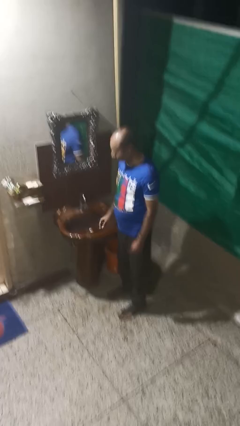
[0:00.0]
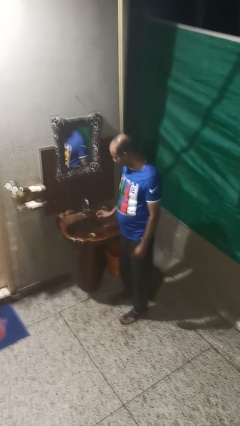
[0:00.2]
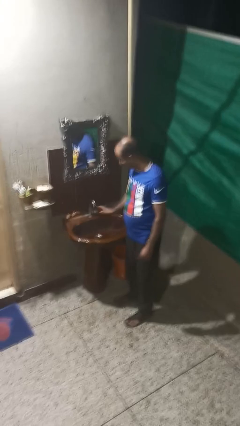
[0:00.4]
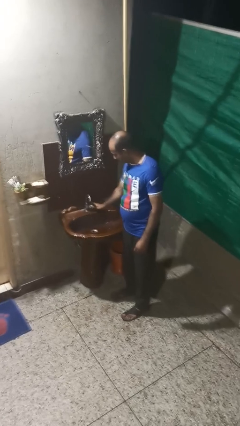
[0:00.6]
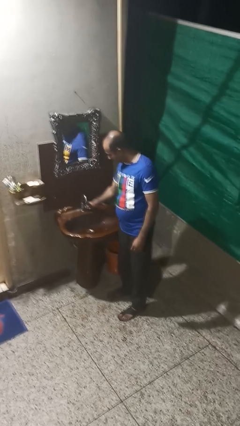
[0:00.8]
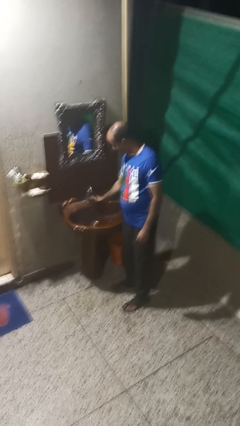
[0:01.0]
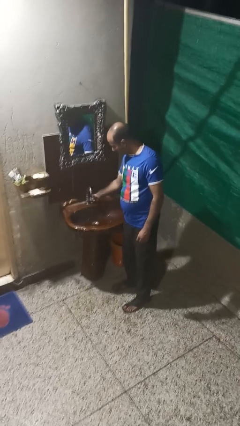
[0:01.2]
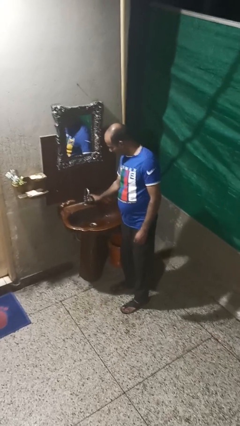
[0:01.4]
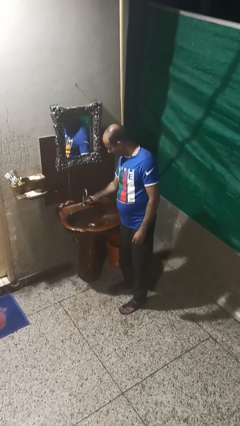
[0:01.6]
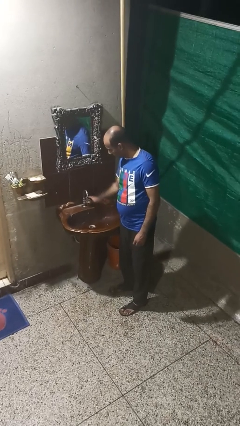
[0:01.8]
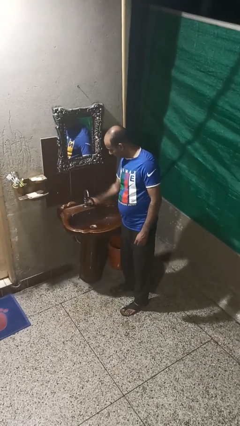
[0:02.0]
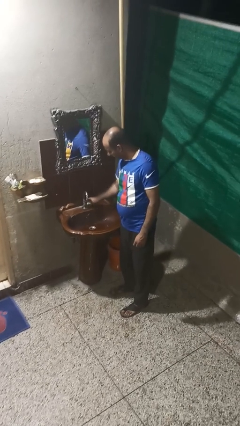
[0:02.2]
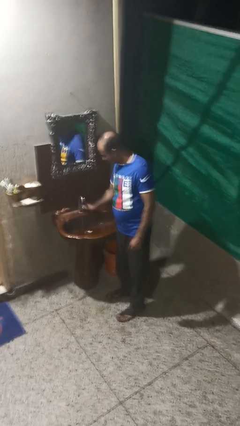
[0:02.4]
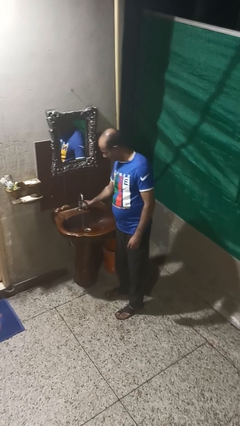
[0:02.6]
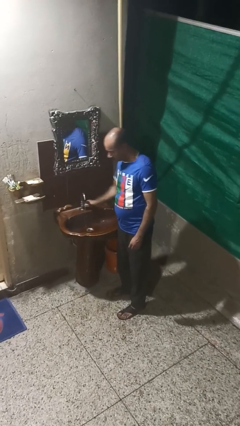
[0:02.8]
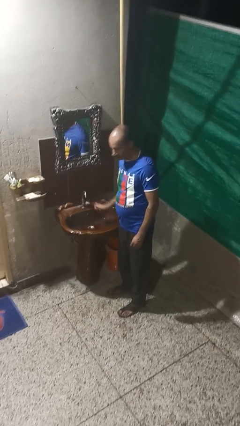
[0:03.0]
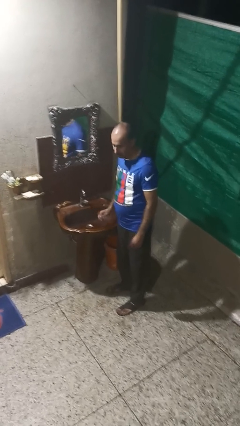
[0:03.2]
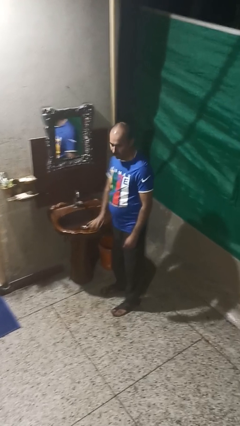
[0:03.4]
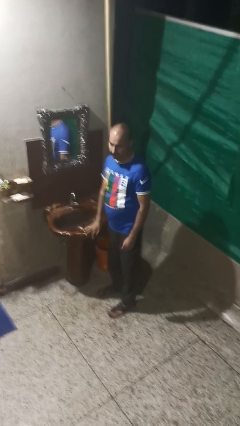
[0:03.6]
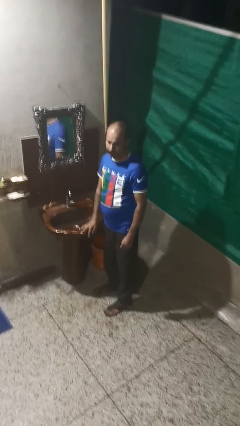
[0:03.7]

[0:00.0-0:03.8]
person turns off faucet

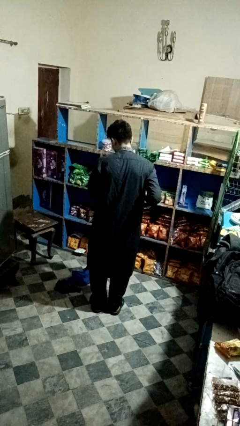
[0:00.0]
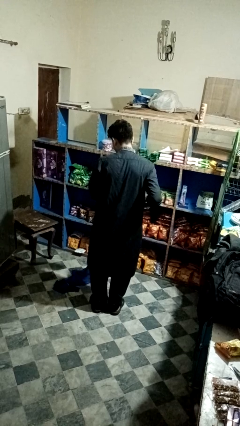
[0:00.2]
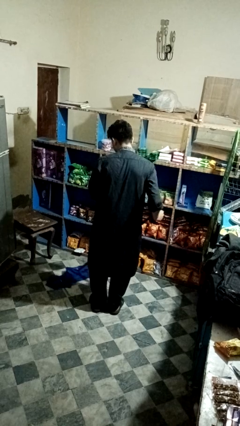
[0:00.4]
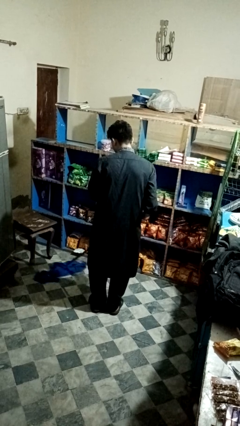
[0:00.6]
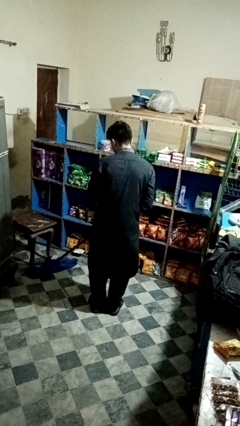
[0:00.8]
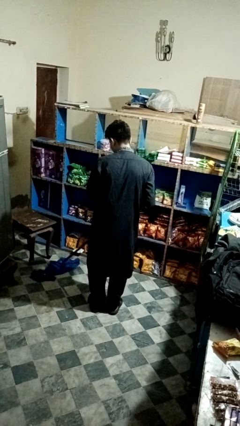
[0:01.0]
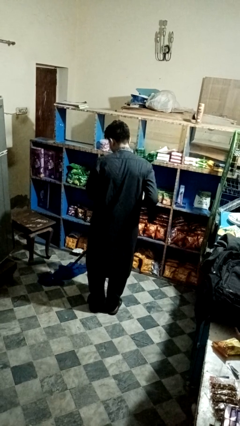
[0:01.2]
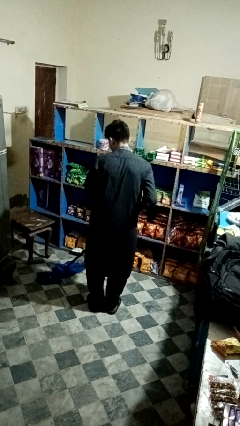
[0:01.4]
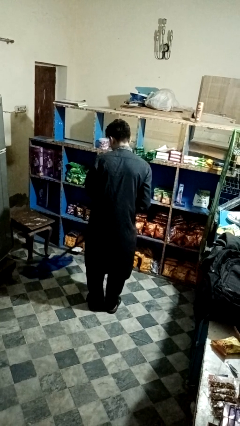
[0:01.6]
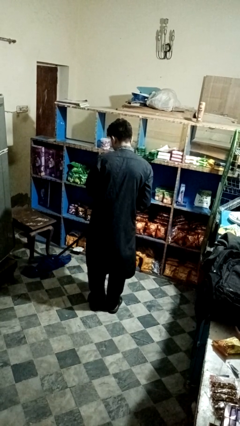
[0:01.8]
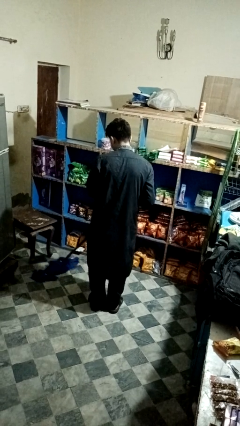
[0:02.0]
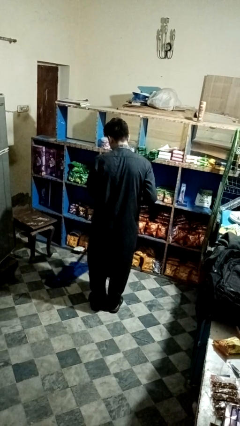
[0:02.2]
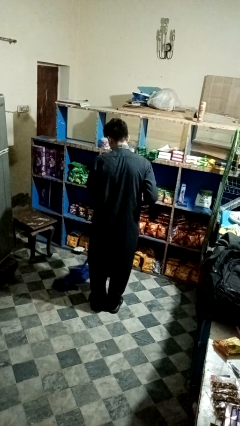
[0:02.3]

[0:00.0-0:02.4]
person mops

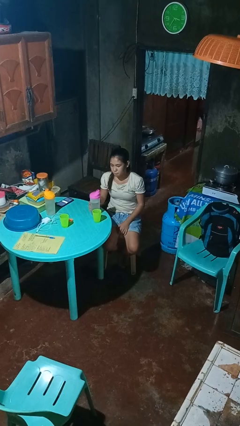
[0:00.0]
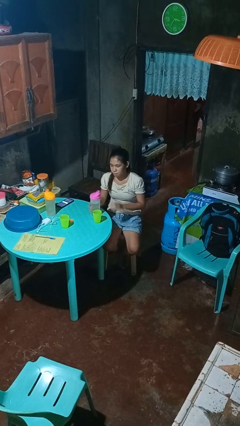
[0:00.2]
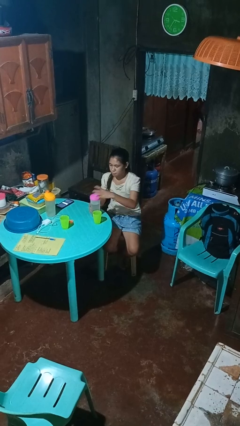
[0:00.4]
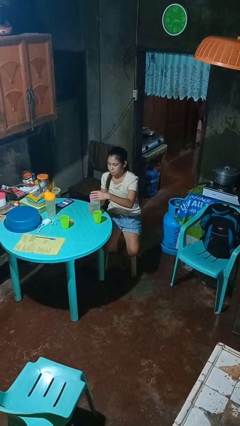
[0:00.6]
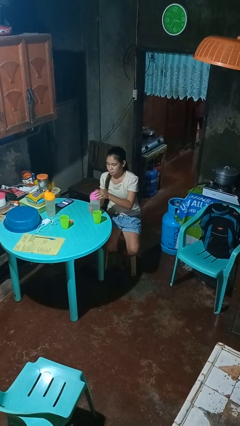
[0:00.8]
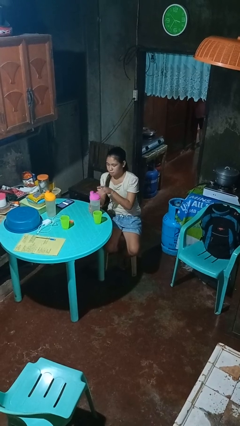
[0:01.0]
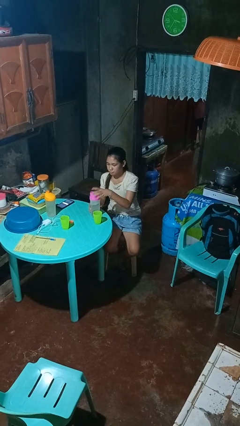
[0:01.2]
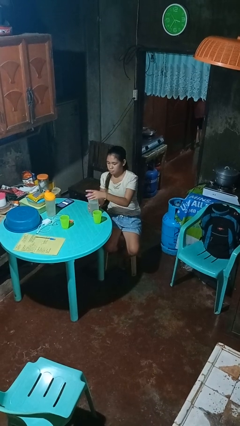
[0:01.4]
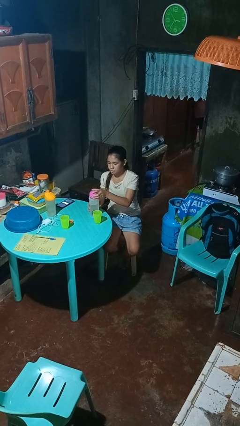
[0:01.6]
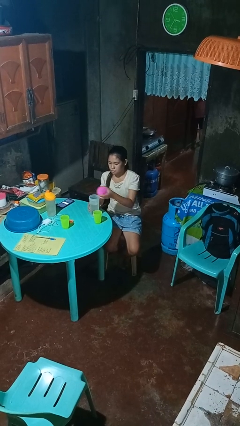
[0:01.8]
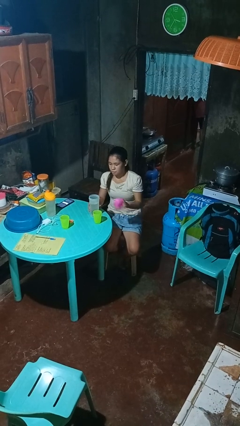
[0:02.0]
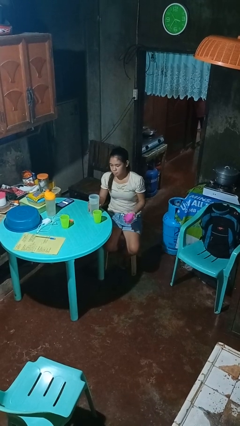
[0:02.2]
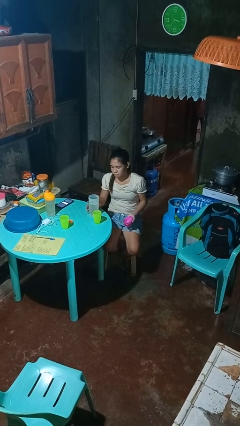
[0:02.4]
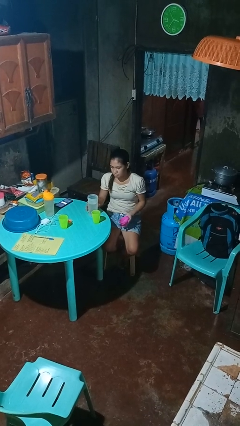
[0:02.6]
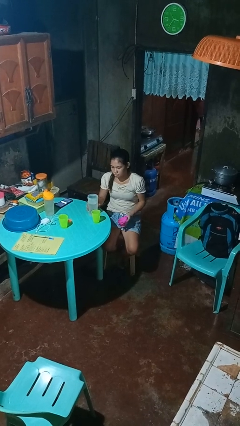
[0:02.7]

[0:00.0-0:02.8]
person unscrews lid from bottle

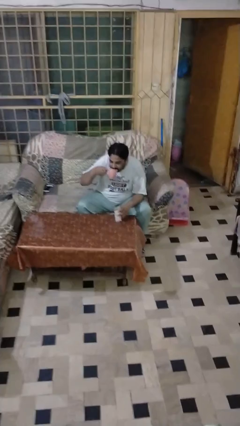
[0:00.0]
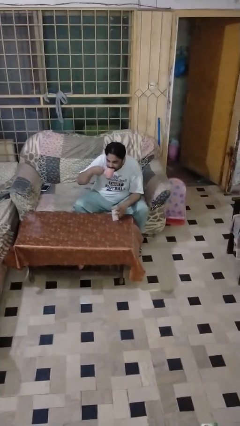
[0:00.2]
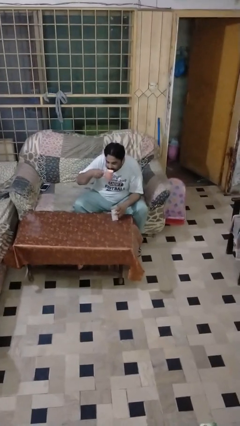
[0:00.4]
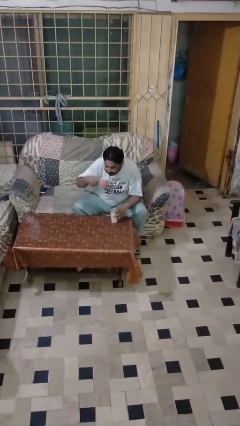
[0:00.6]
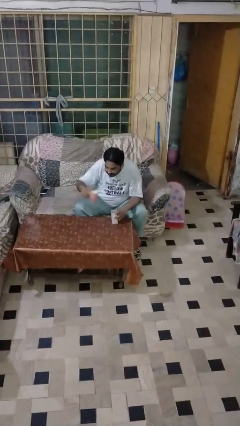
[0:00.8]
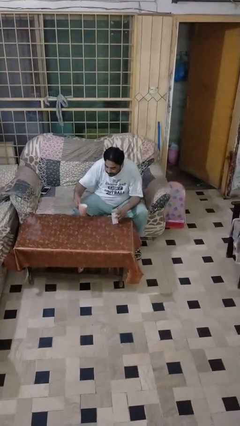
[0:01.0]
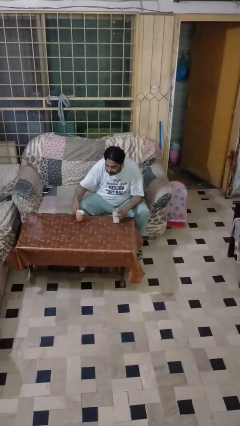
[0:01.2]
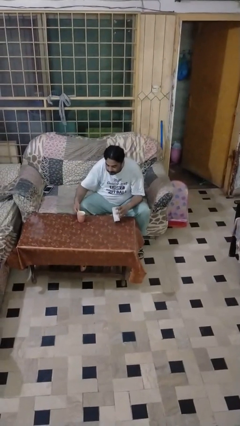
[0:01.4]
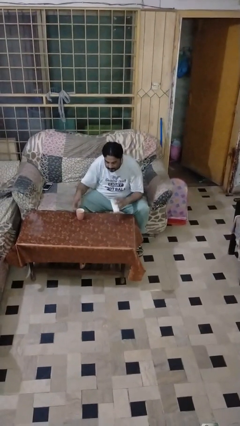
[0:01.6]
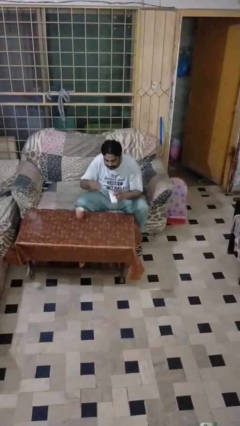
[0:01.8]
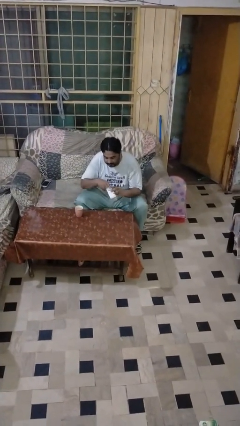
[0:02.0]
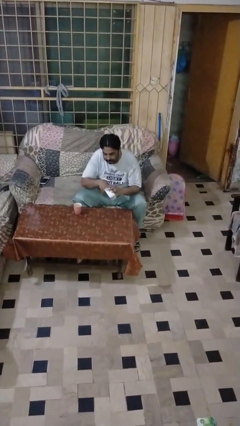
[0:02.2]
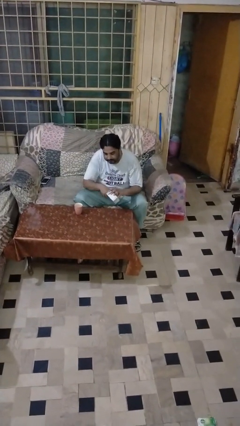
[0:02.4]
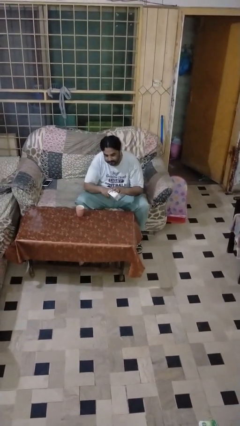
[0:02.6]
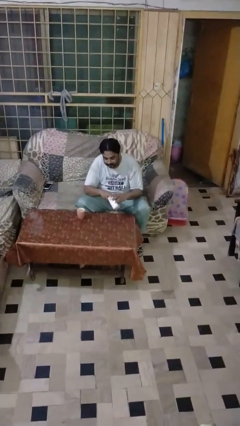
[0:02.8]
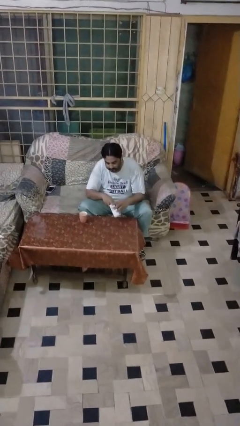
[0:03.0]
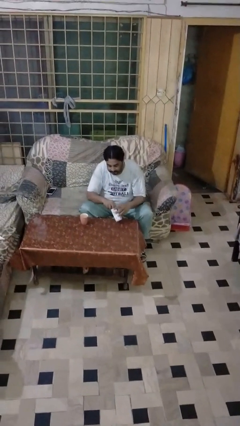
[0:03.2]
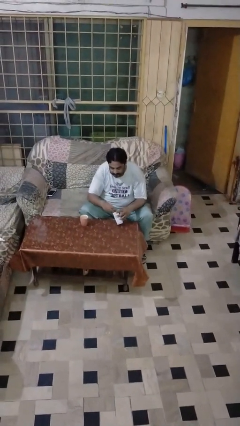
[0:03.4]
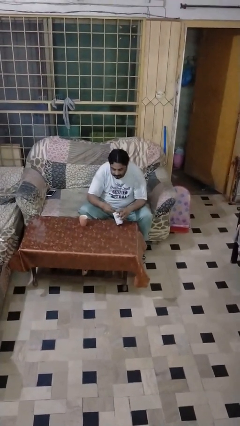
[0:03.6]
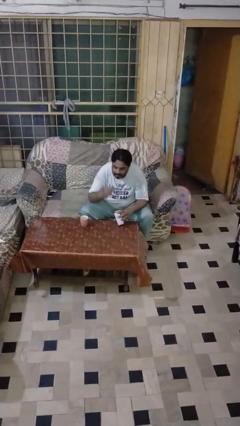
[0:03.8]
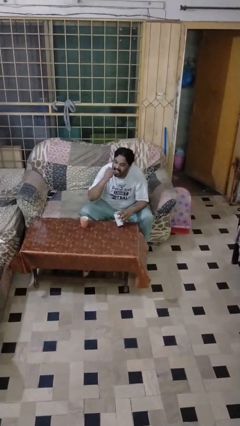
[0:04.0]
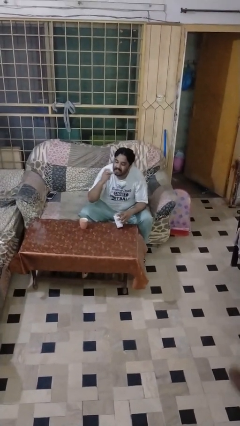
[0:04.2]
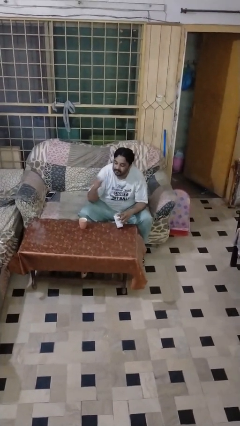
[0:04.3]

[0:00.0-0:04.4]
person takes medicine pills

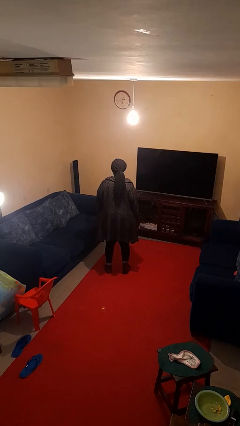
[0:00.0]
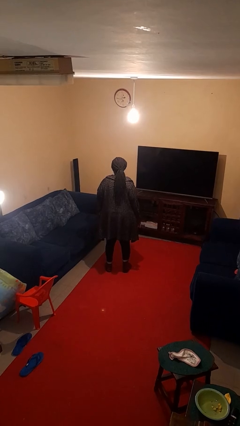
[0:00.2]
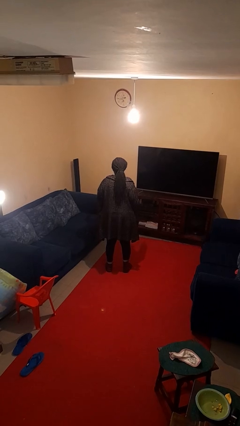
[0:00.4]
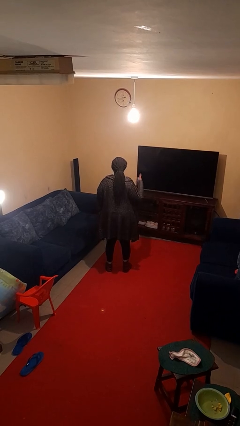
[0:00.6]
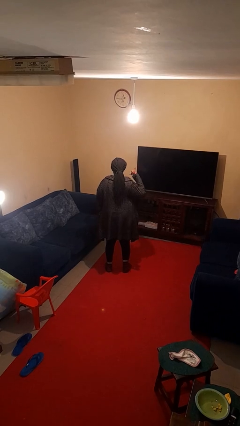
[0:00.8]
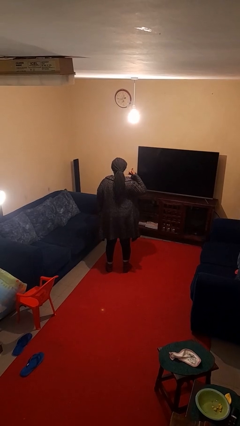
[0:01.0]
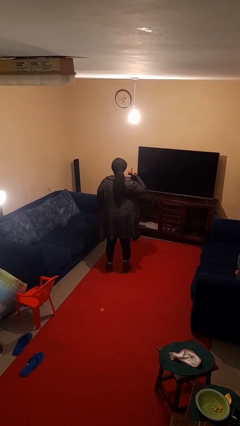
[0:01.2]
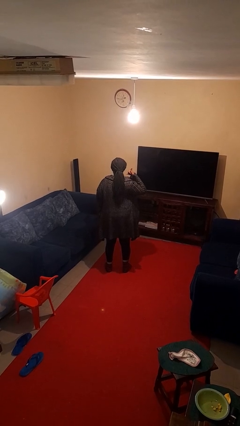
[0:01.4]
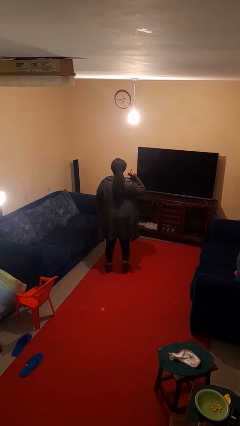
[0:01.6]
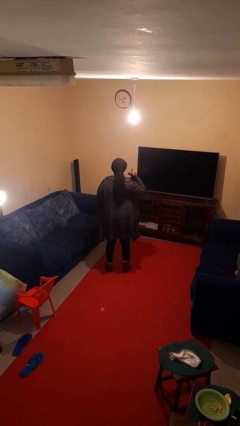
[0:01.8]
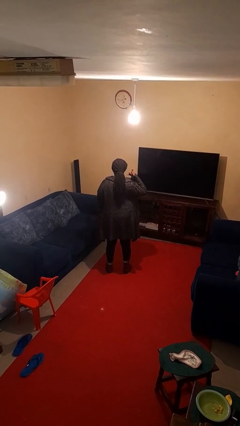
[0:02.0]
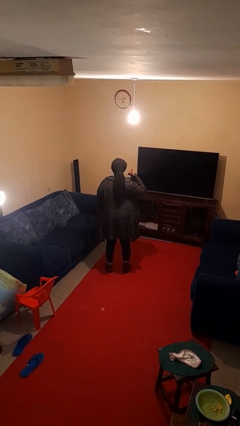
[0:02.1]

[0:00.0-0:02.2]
person gestures call me

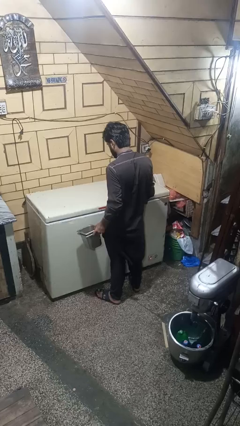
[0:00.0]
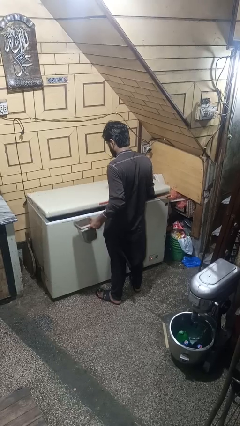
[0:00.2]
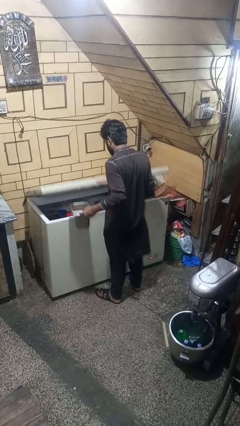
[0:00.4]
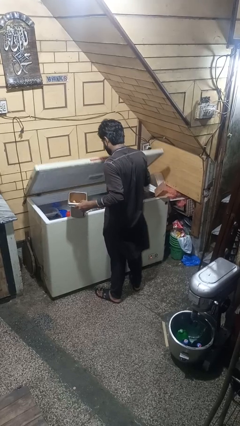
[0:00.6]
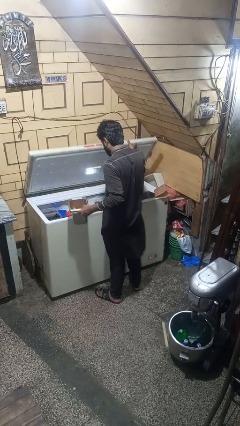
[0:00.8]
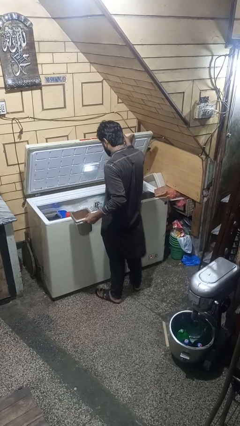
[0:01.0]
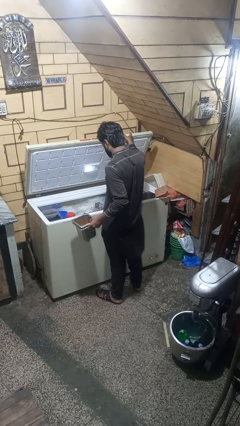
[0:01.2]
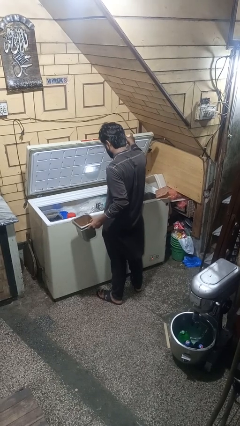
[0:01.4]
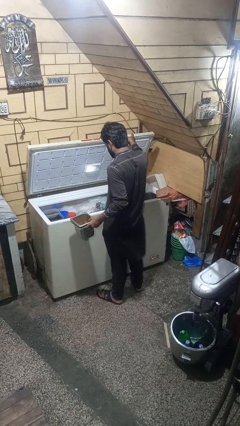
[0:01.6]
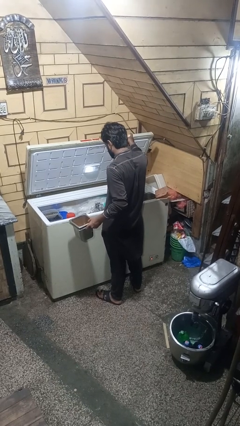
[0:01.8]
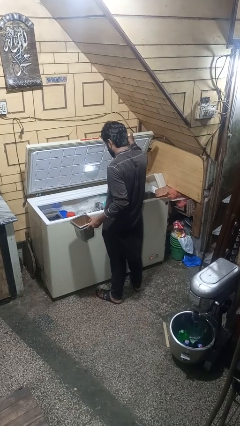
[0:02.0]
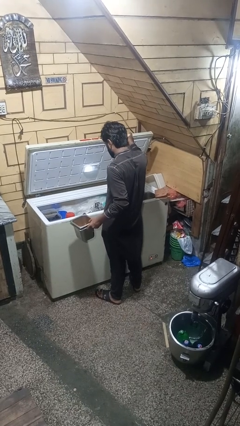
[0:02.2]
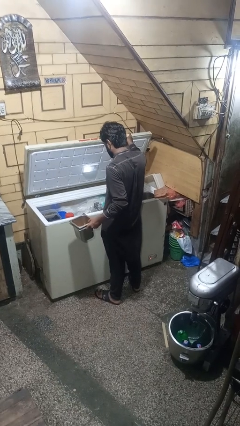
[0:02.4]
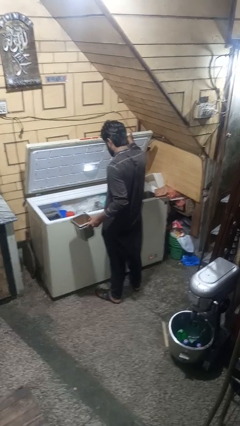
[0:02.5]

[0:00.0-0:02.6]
person opens refrigerator
